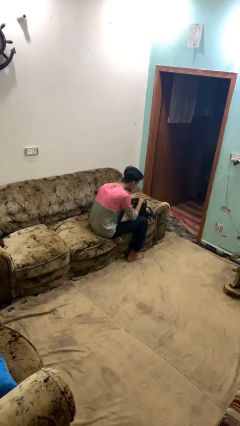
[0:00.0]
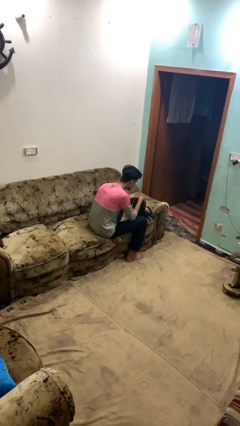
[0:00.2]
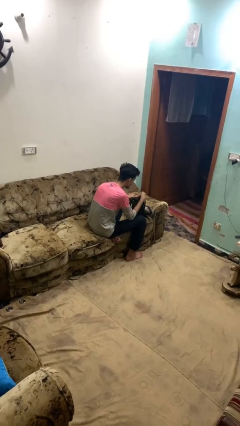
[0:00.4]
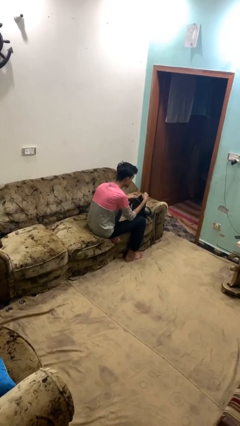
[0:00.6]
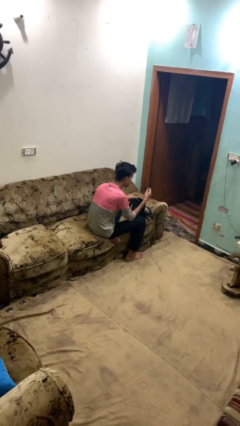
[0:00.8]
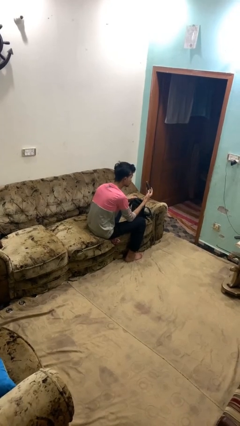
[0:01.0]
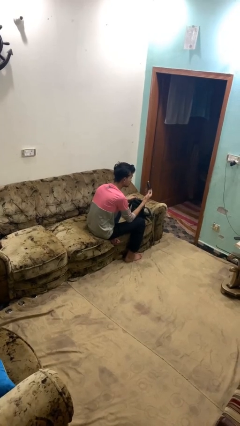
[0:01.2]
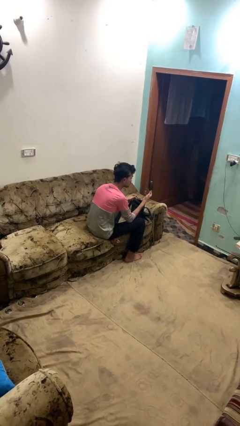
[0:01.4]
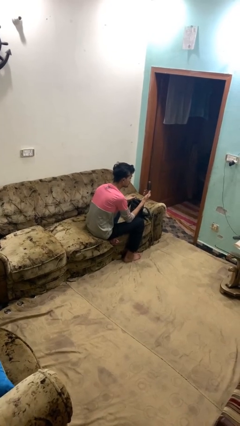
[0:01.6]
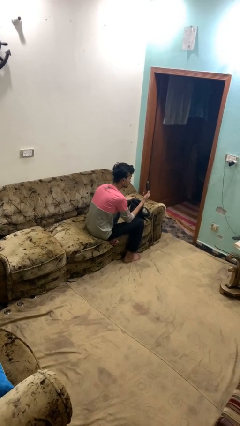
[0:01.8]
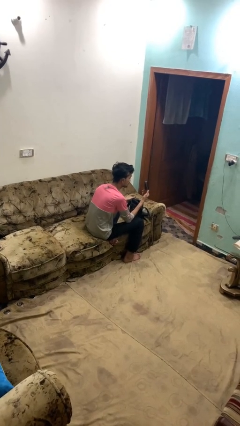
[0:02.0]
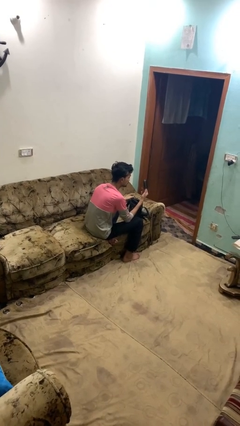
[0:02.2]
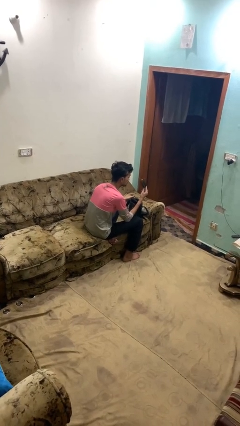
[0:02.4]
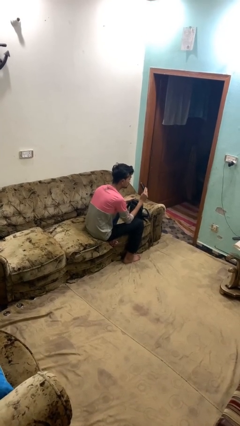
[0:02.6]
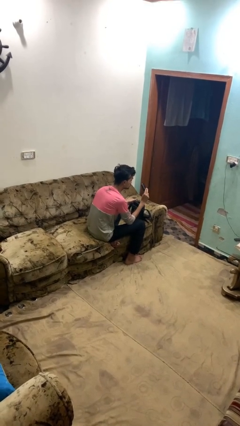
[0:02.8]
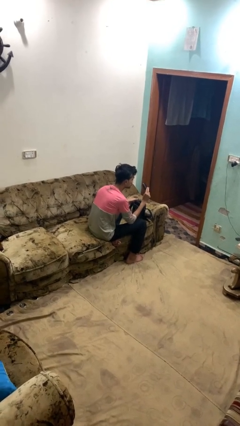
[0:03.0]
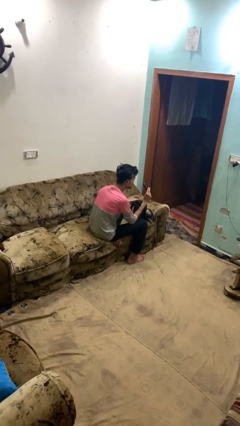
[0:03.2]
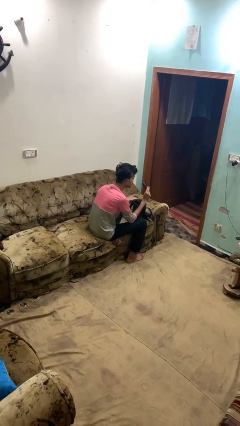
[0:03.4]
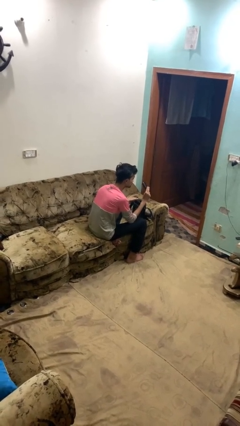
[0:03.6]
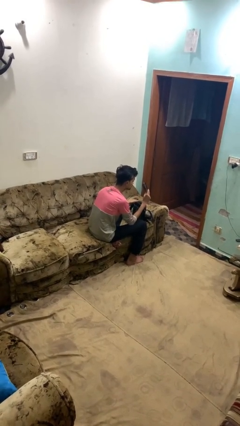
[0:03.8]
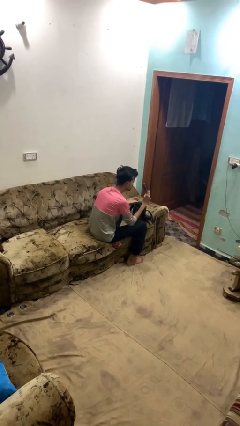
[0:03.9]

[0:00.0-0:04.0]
person takes object from backpack

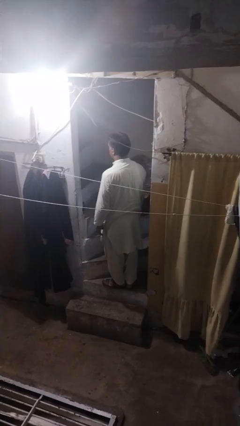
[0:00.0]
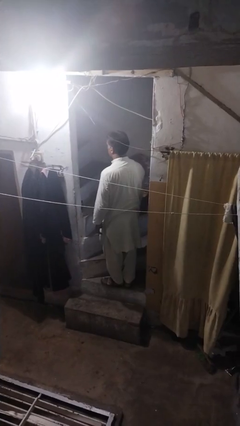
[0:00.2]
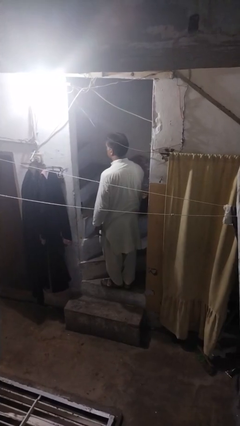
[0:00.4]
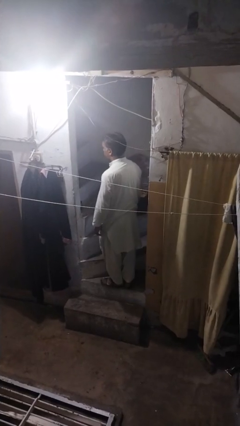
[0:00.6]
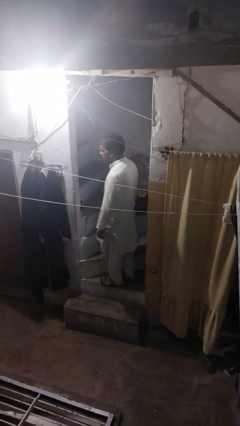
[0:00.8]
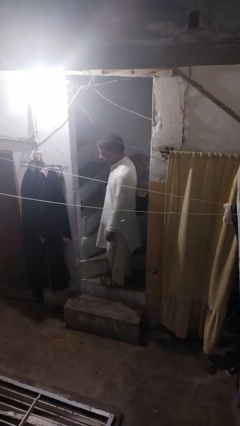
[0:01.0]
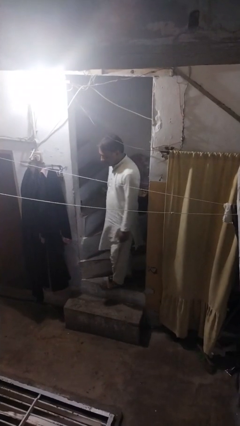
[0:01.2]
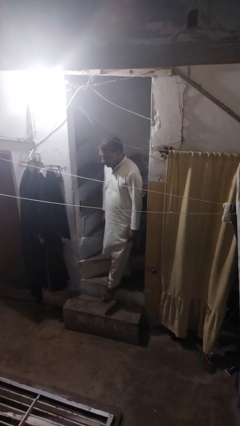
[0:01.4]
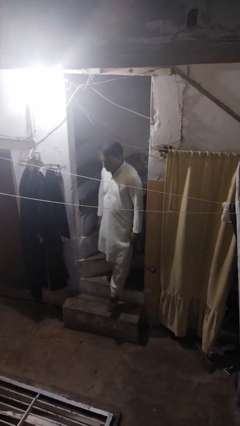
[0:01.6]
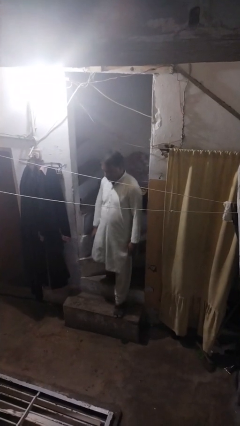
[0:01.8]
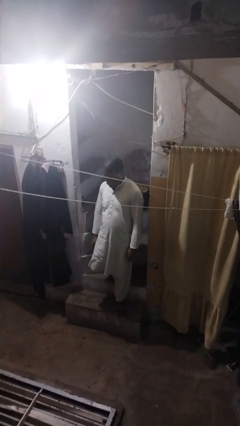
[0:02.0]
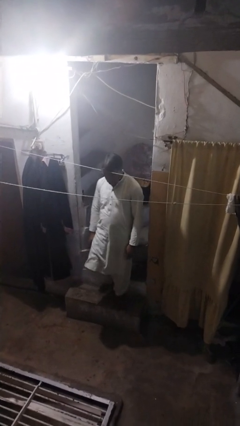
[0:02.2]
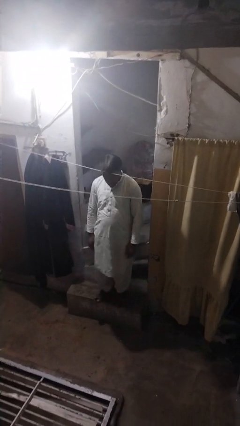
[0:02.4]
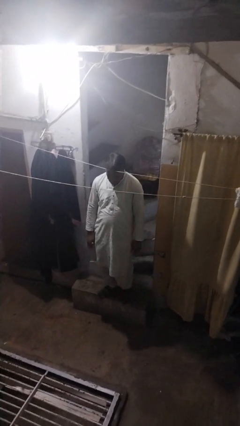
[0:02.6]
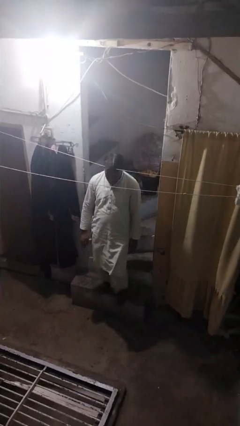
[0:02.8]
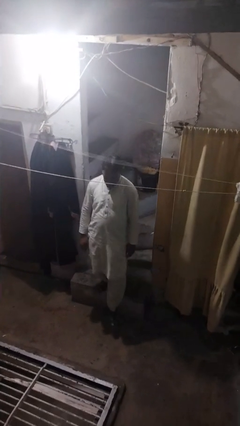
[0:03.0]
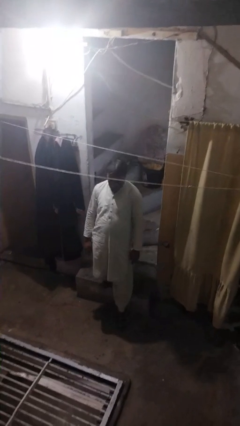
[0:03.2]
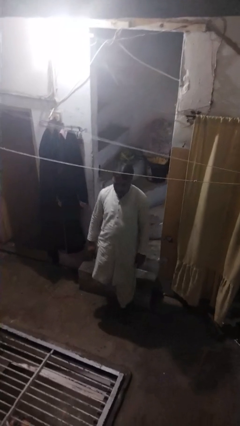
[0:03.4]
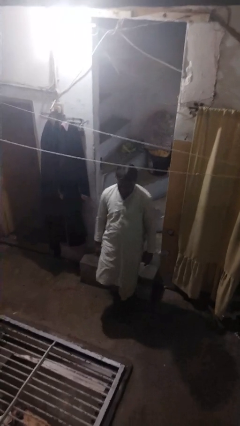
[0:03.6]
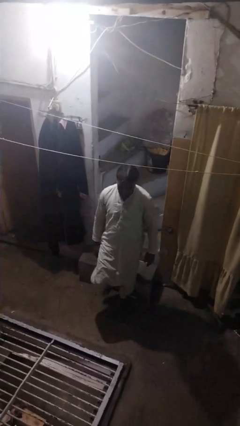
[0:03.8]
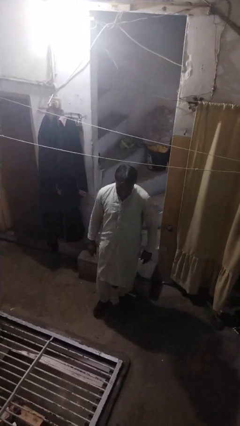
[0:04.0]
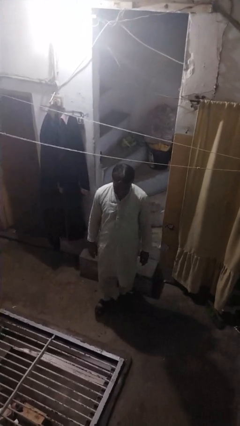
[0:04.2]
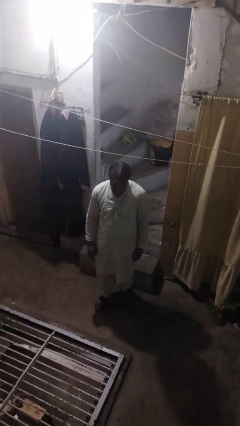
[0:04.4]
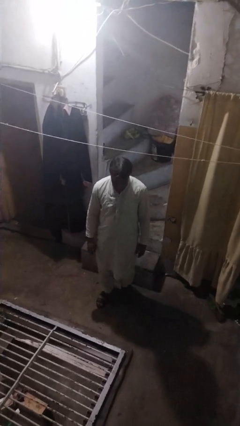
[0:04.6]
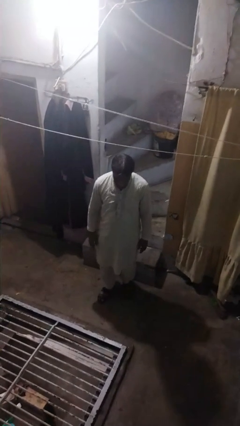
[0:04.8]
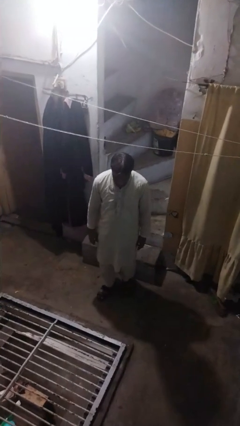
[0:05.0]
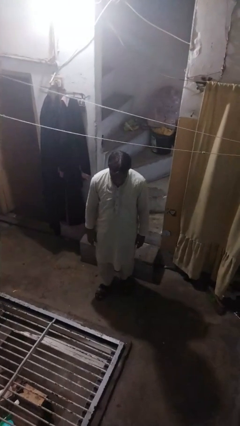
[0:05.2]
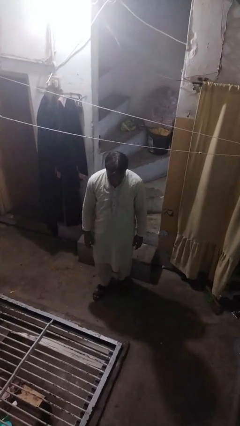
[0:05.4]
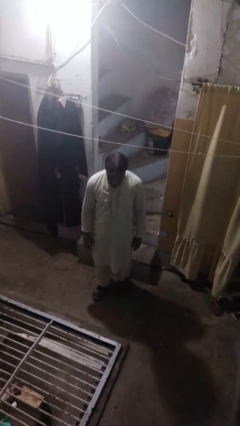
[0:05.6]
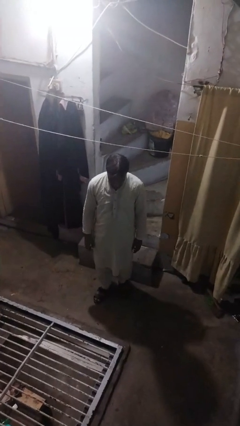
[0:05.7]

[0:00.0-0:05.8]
person climbs down stairs

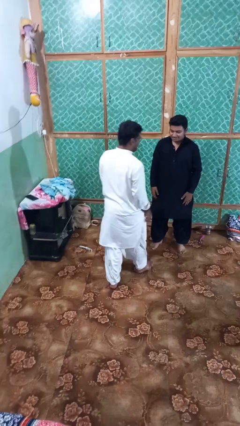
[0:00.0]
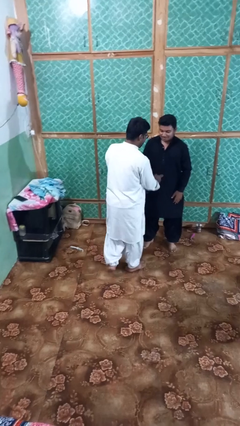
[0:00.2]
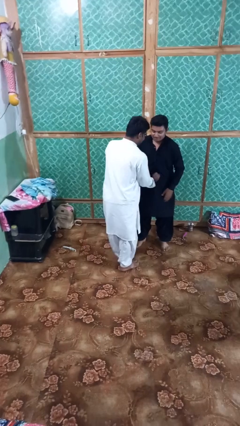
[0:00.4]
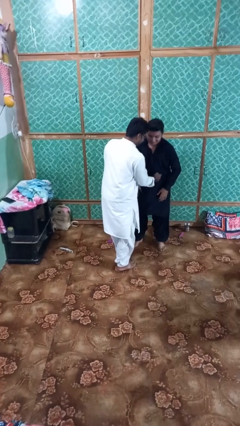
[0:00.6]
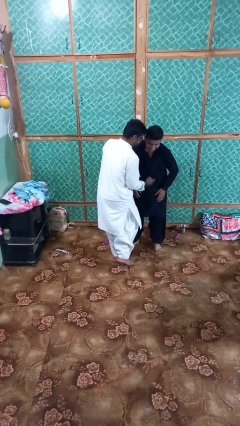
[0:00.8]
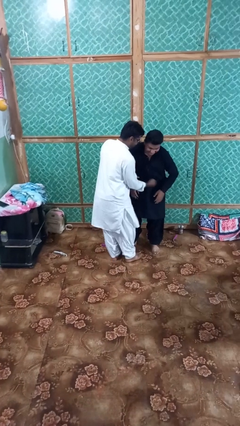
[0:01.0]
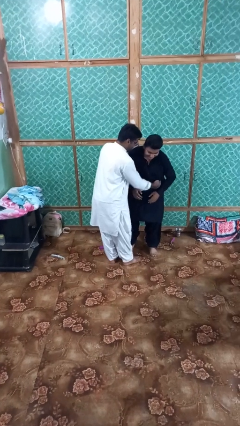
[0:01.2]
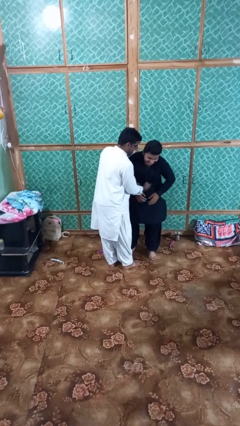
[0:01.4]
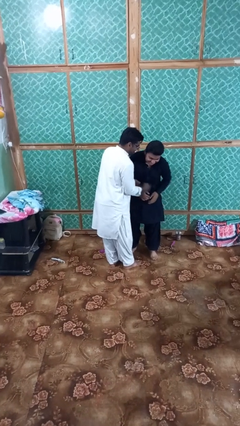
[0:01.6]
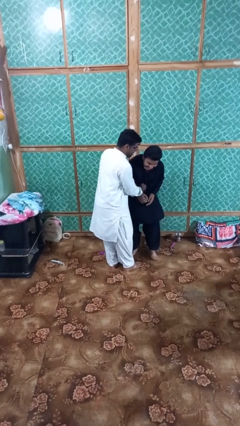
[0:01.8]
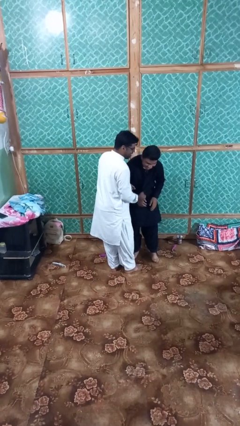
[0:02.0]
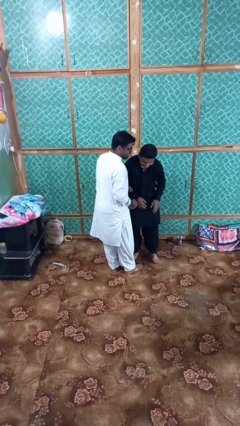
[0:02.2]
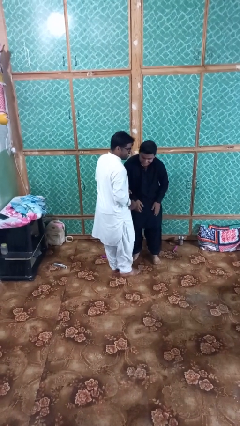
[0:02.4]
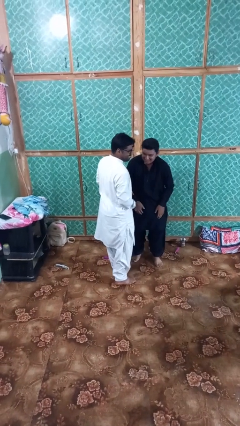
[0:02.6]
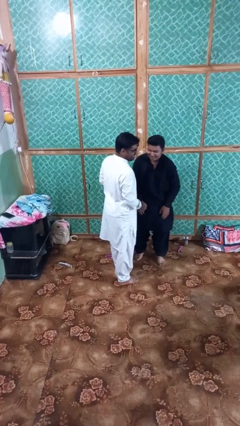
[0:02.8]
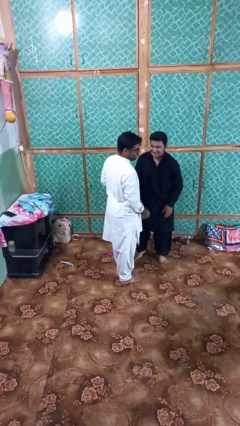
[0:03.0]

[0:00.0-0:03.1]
person tickles person

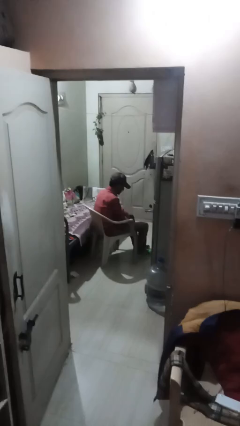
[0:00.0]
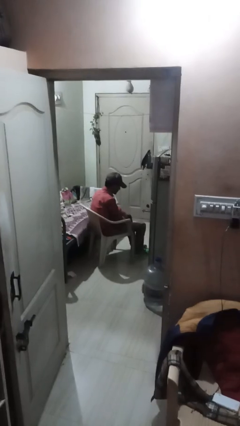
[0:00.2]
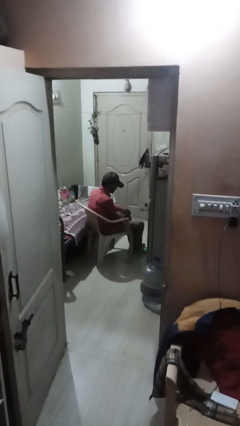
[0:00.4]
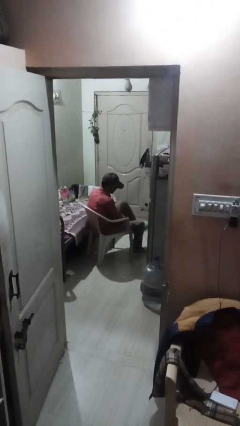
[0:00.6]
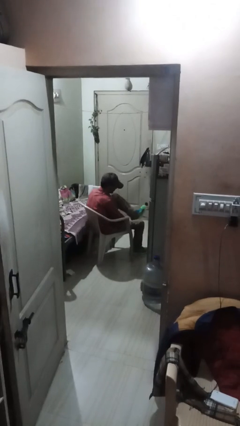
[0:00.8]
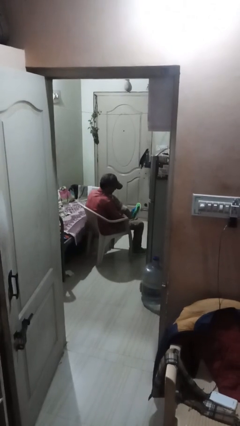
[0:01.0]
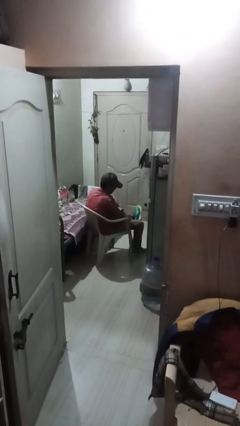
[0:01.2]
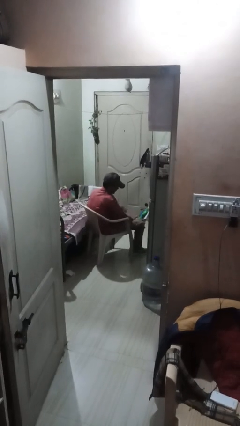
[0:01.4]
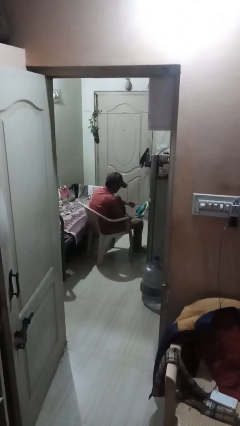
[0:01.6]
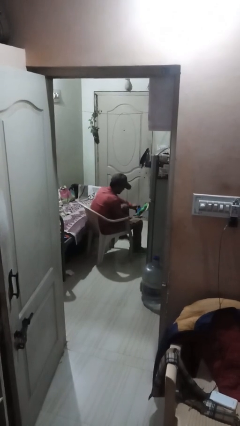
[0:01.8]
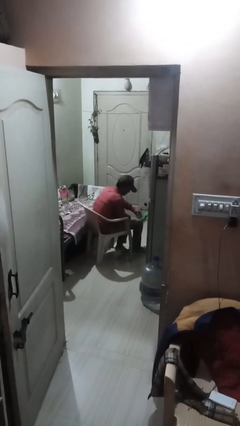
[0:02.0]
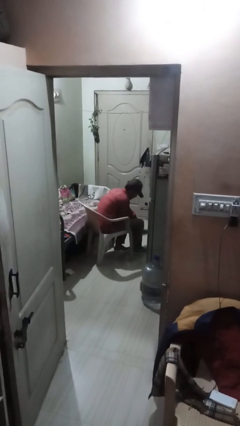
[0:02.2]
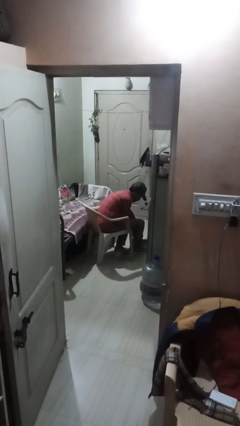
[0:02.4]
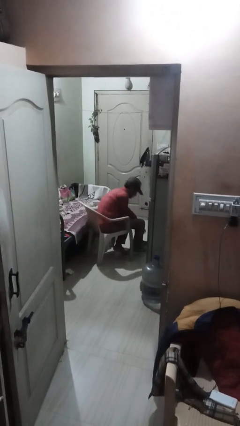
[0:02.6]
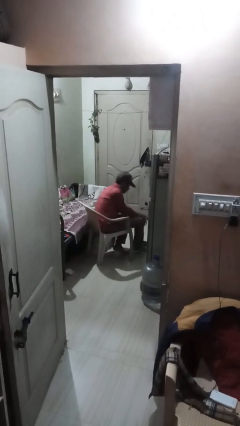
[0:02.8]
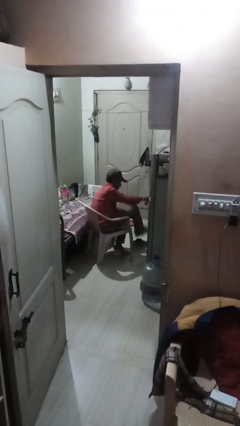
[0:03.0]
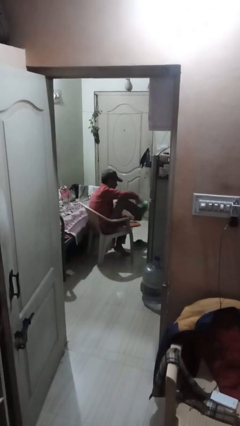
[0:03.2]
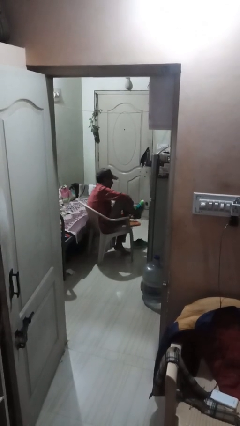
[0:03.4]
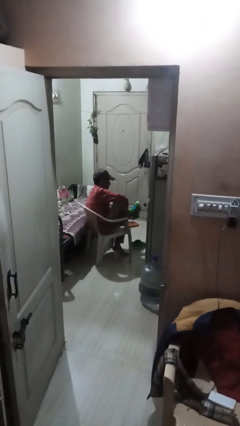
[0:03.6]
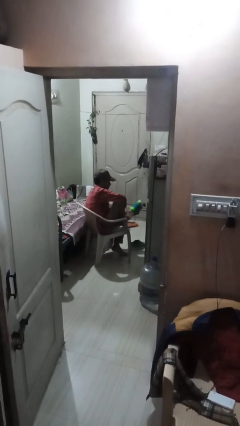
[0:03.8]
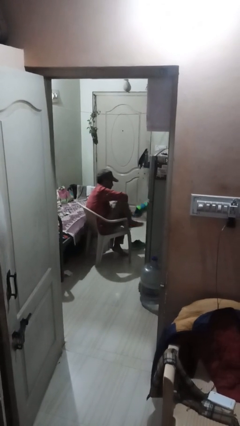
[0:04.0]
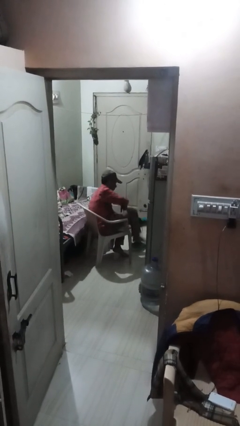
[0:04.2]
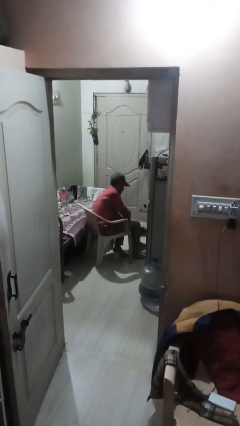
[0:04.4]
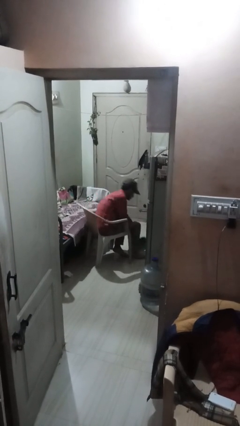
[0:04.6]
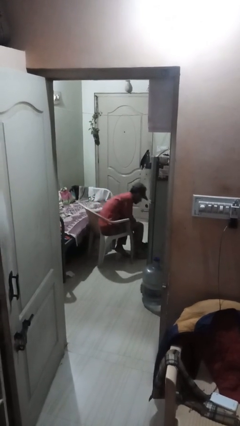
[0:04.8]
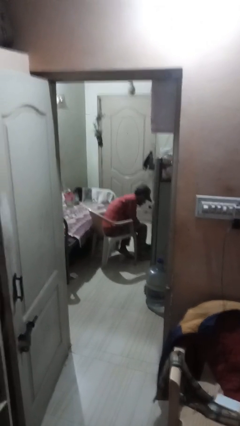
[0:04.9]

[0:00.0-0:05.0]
person takes off shoes

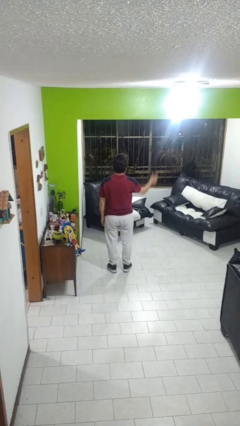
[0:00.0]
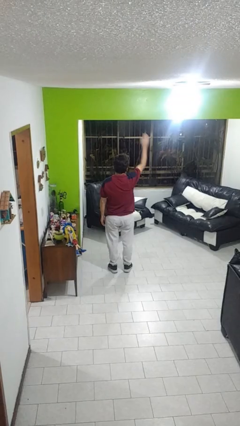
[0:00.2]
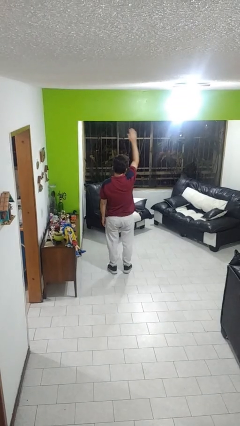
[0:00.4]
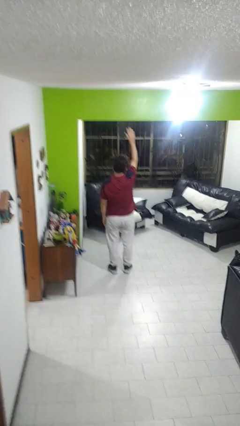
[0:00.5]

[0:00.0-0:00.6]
person gestures raise hand
